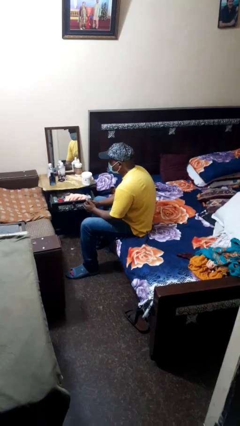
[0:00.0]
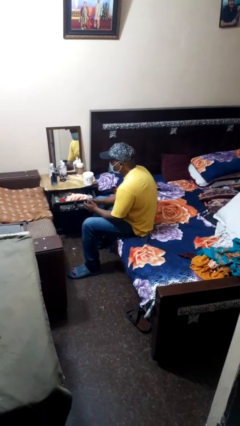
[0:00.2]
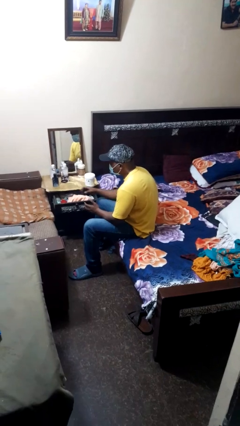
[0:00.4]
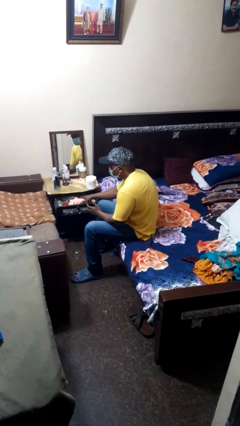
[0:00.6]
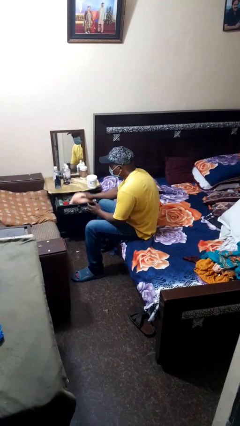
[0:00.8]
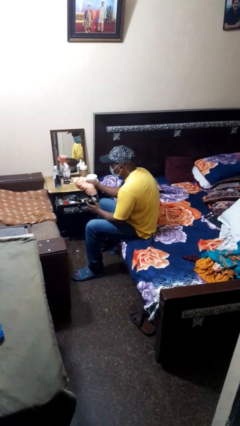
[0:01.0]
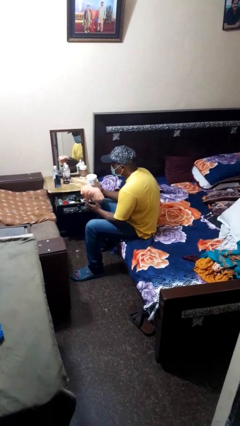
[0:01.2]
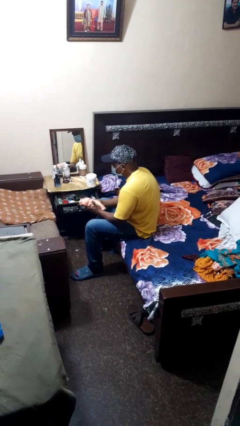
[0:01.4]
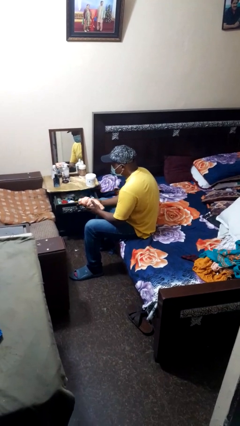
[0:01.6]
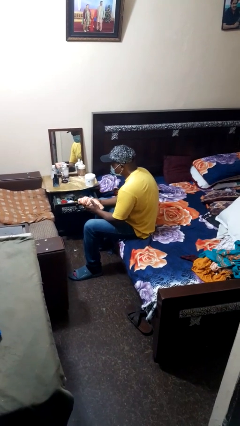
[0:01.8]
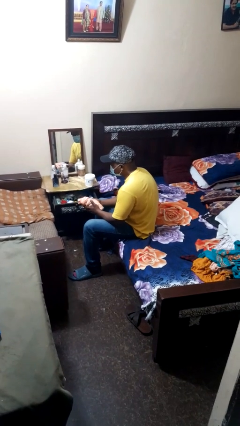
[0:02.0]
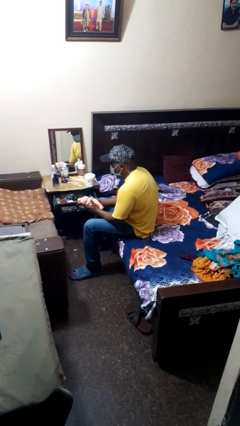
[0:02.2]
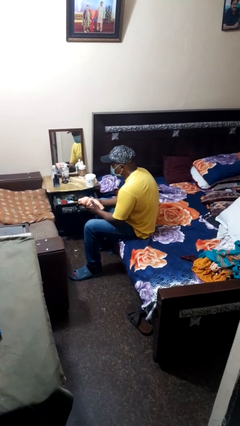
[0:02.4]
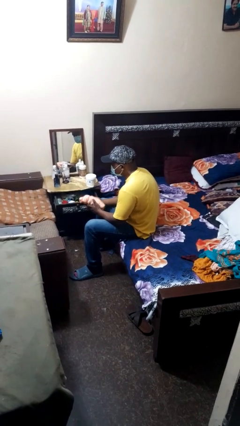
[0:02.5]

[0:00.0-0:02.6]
person takes clothes from dresser

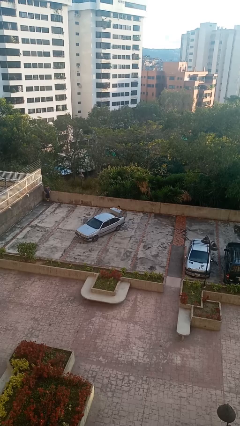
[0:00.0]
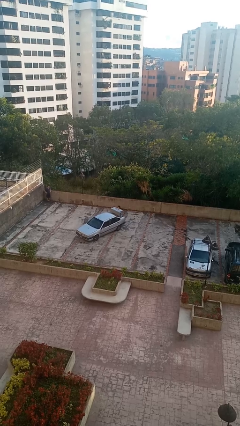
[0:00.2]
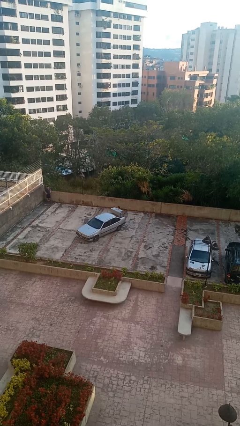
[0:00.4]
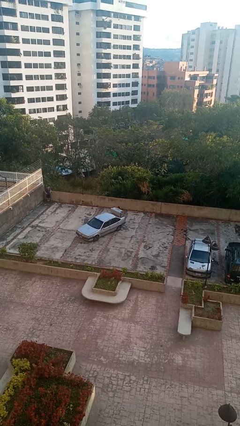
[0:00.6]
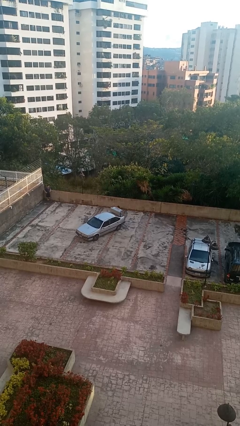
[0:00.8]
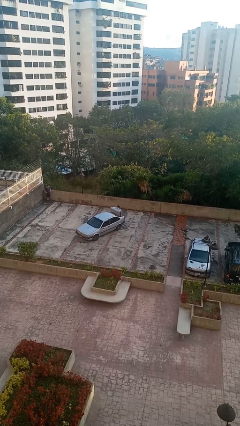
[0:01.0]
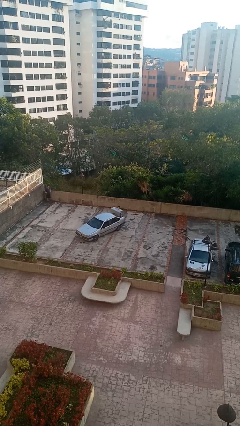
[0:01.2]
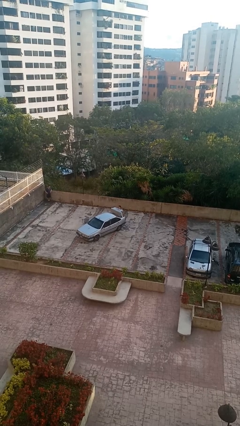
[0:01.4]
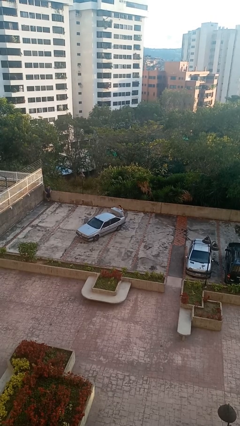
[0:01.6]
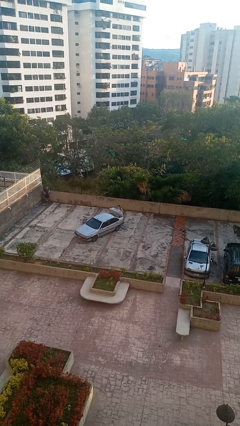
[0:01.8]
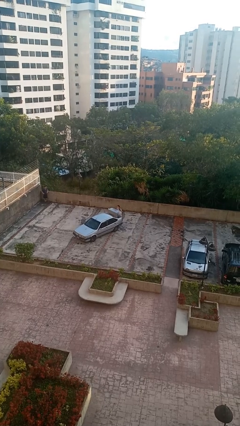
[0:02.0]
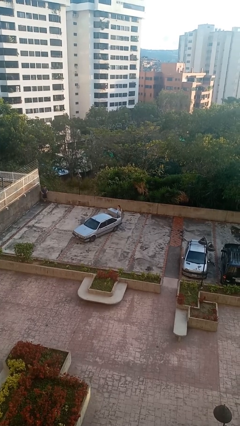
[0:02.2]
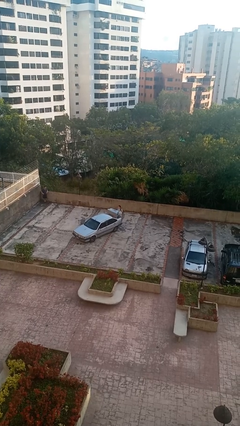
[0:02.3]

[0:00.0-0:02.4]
person unloads car

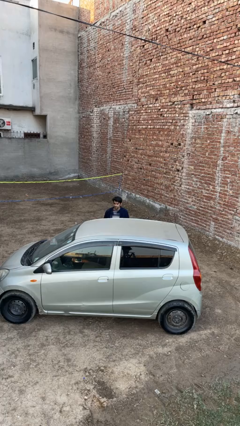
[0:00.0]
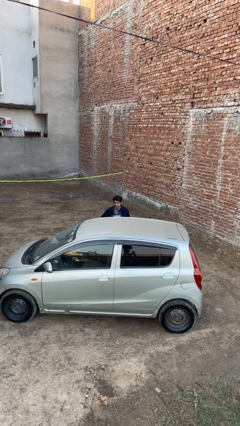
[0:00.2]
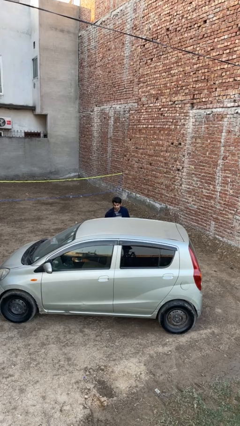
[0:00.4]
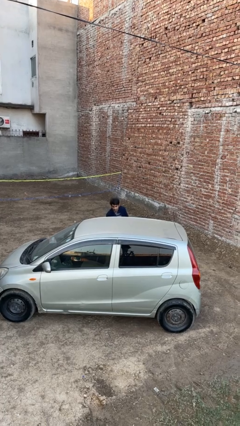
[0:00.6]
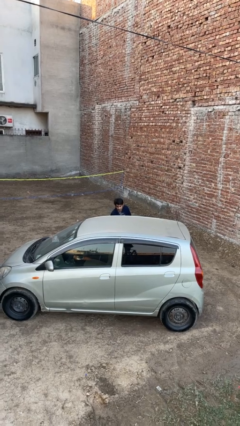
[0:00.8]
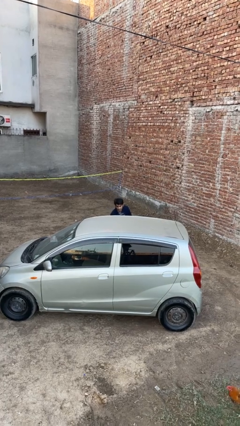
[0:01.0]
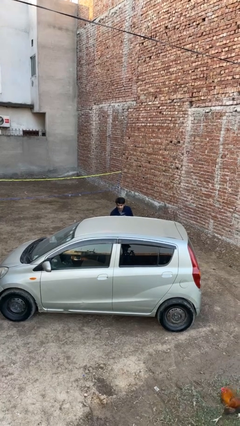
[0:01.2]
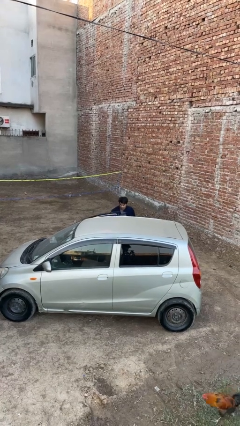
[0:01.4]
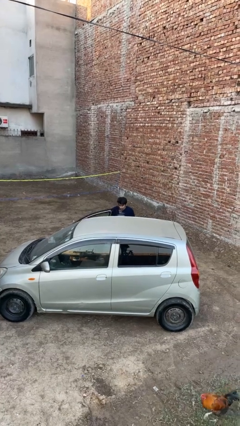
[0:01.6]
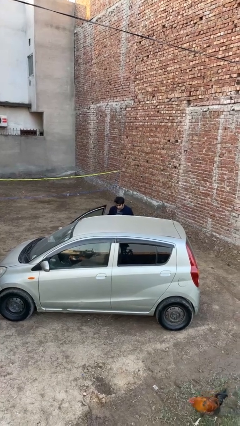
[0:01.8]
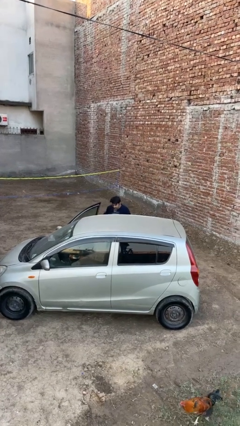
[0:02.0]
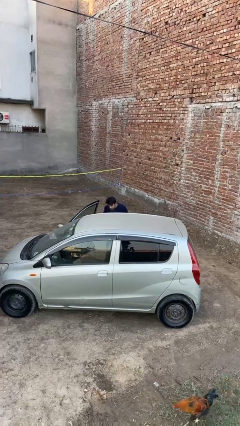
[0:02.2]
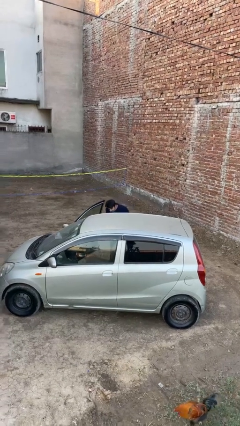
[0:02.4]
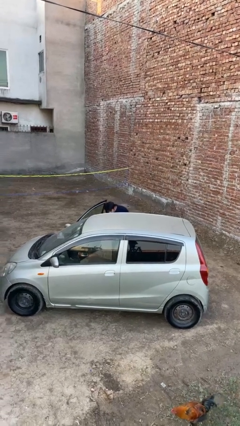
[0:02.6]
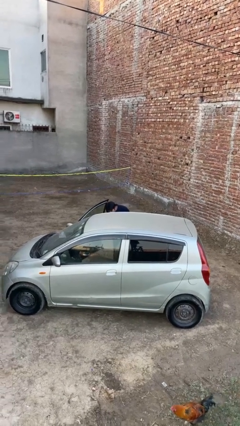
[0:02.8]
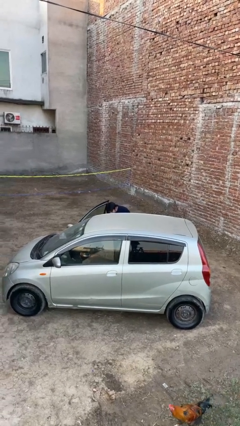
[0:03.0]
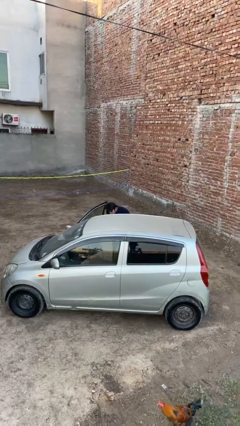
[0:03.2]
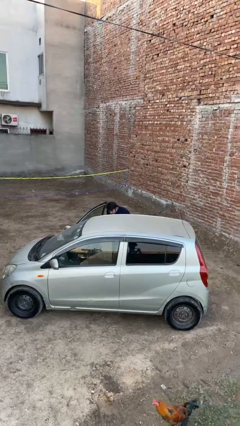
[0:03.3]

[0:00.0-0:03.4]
person opens car door

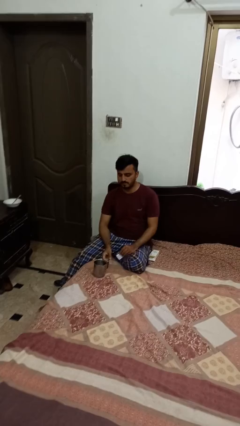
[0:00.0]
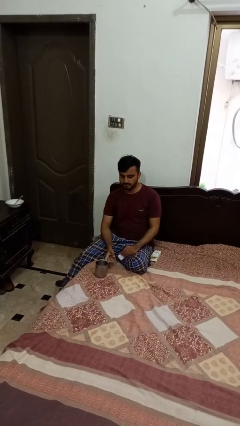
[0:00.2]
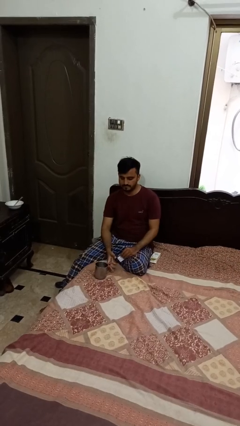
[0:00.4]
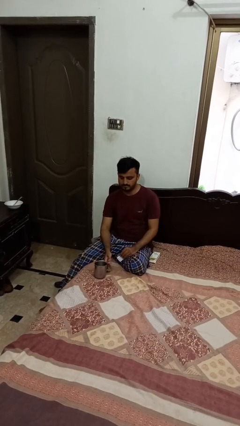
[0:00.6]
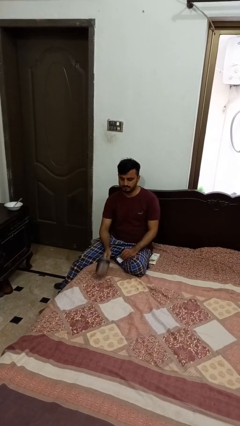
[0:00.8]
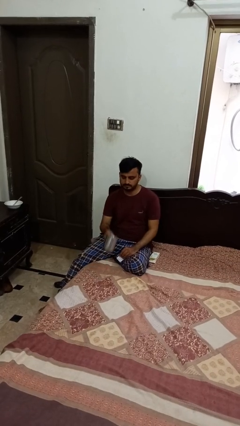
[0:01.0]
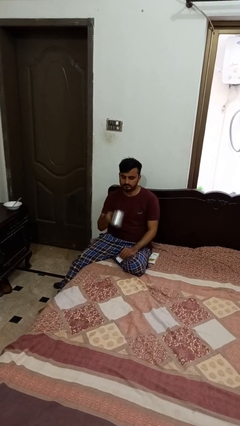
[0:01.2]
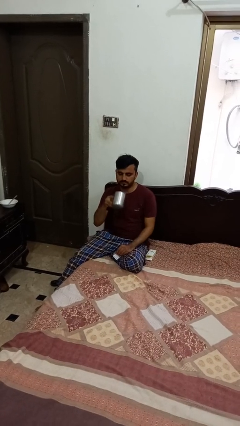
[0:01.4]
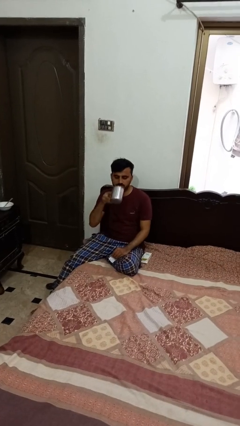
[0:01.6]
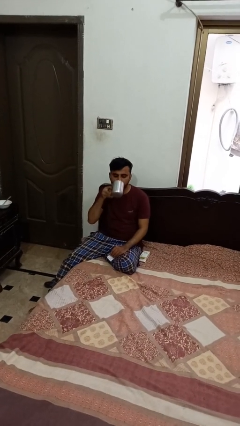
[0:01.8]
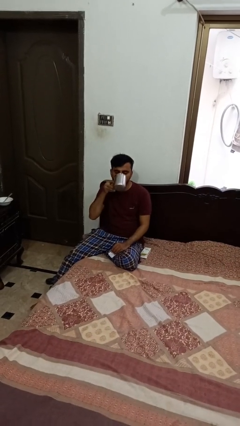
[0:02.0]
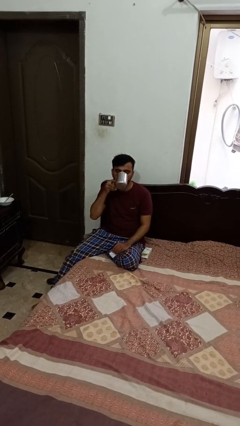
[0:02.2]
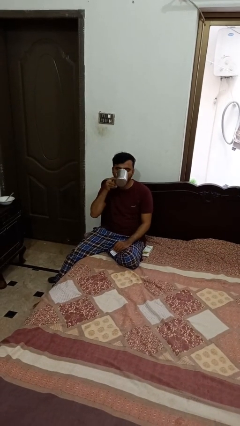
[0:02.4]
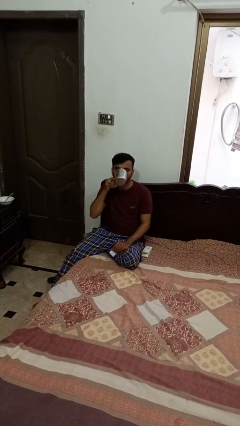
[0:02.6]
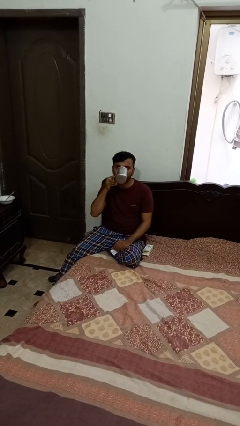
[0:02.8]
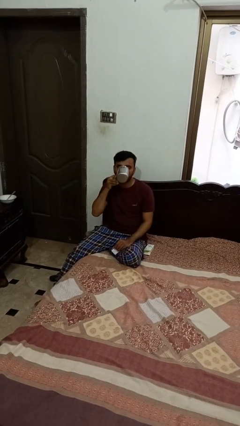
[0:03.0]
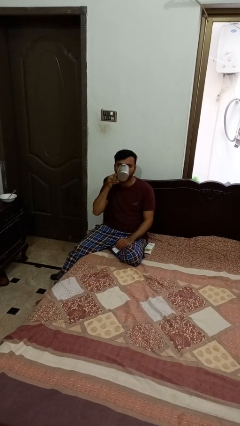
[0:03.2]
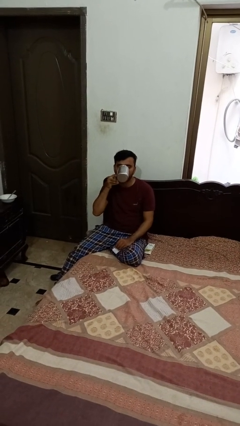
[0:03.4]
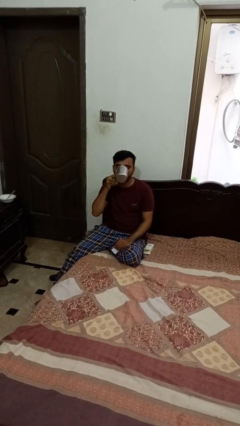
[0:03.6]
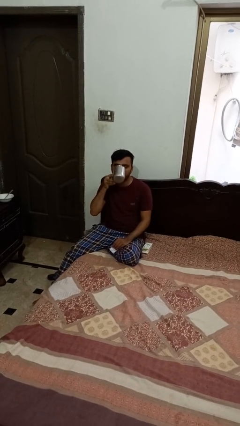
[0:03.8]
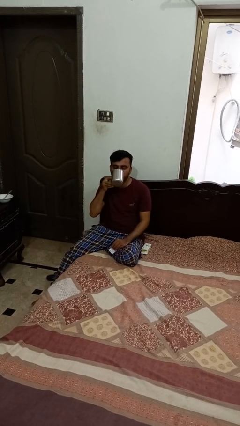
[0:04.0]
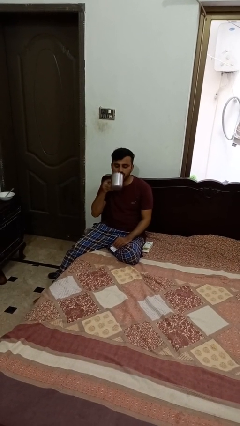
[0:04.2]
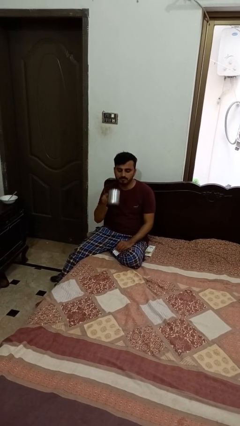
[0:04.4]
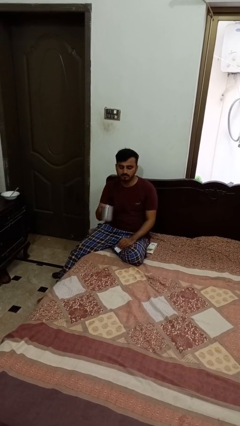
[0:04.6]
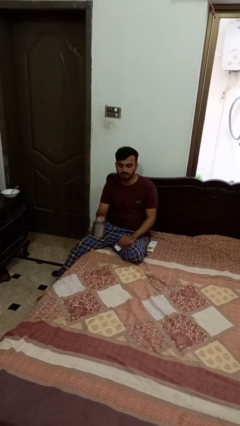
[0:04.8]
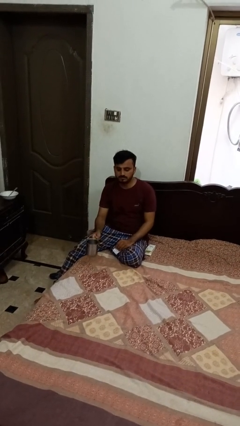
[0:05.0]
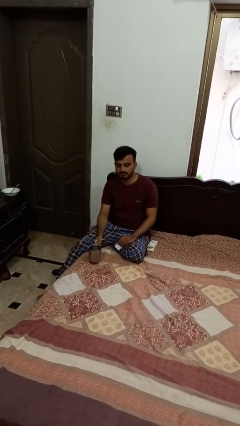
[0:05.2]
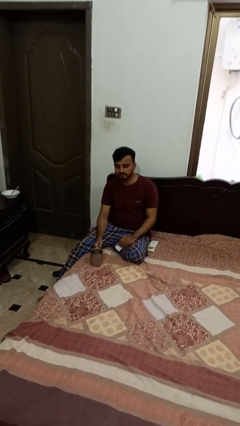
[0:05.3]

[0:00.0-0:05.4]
person drinks from cup

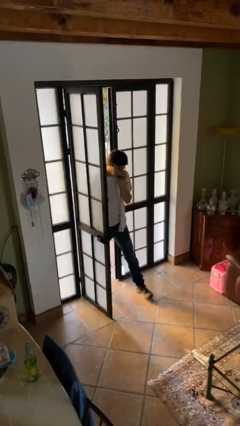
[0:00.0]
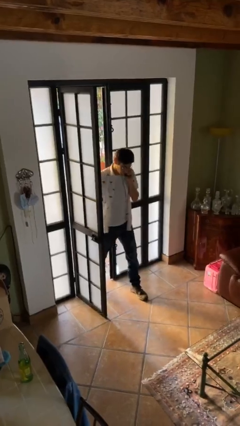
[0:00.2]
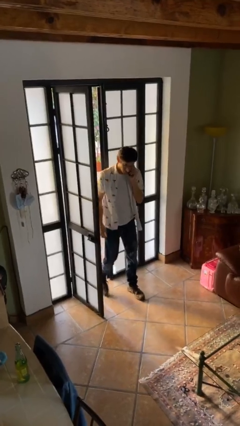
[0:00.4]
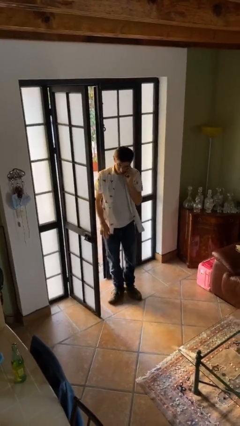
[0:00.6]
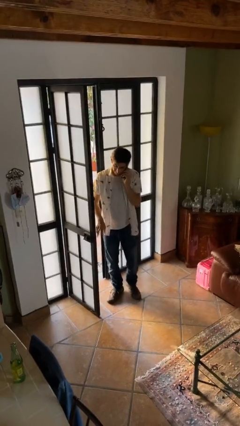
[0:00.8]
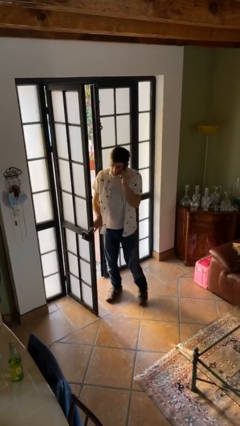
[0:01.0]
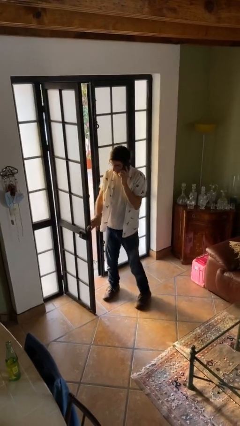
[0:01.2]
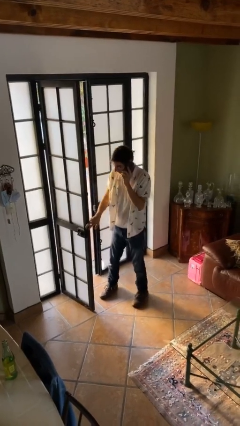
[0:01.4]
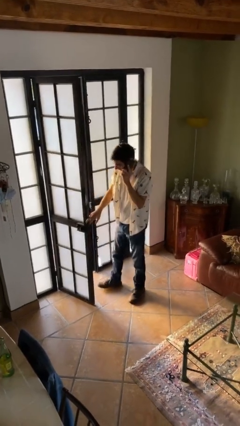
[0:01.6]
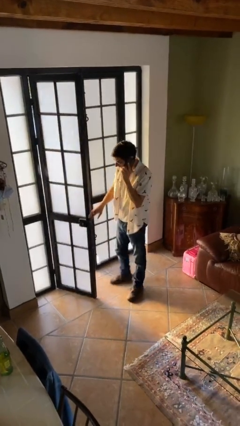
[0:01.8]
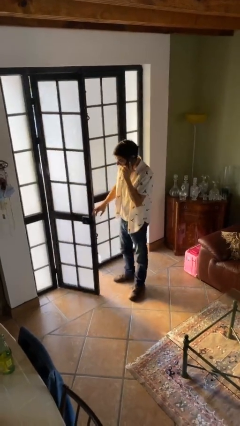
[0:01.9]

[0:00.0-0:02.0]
person enters scene through structure

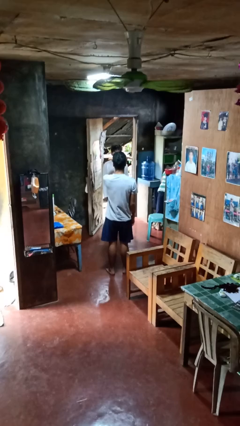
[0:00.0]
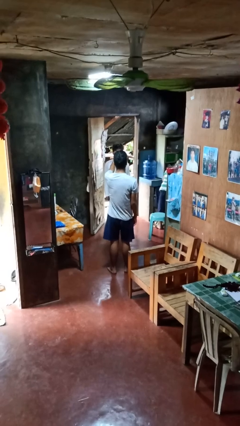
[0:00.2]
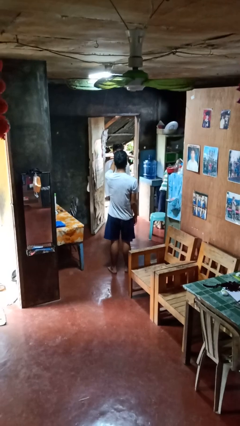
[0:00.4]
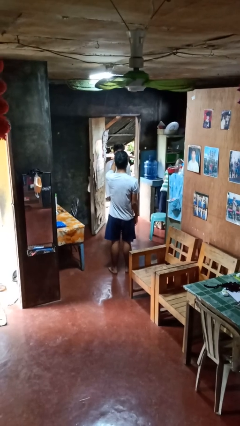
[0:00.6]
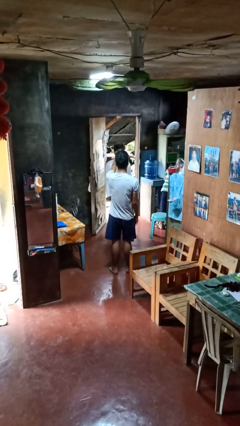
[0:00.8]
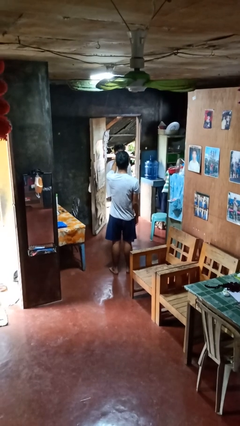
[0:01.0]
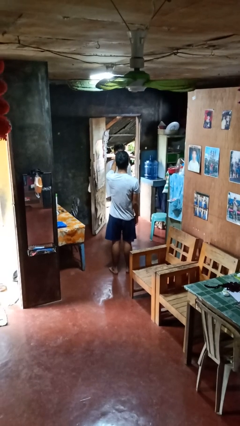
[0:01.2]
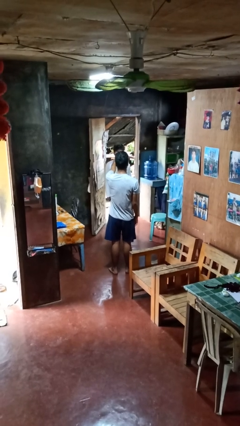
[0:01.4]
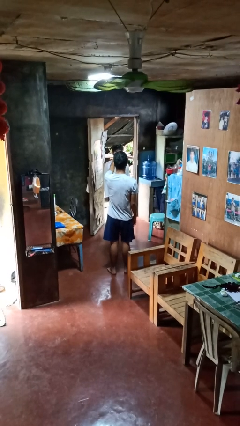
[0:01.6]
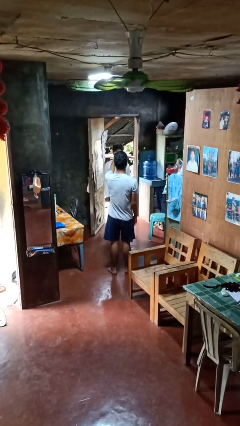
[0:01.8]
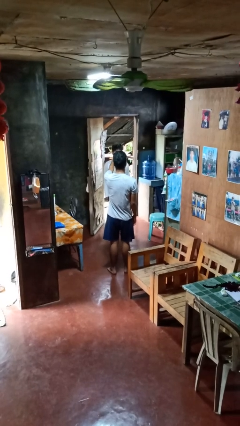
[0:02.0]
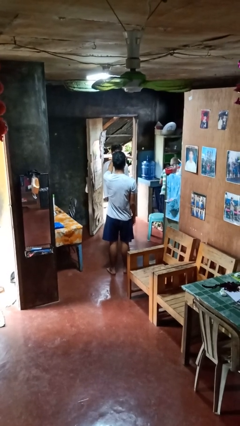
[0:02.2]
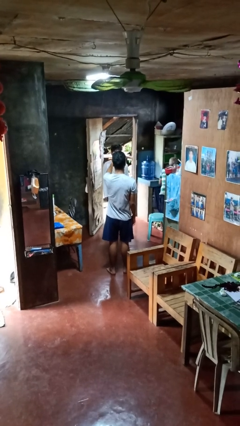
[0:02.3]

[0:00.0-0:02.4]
person points at person
